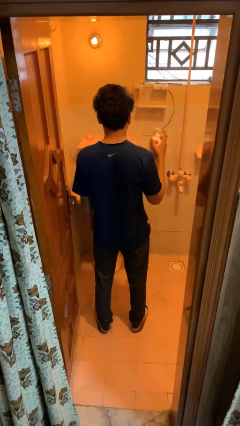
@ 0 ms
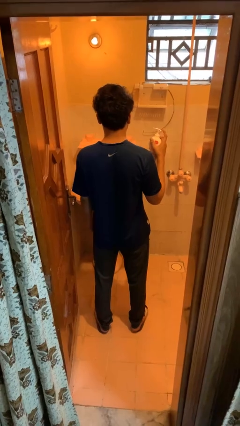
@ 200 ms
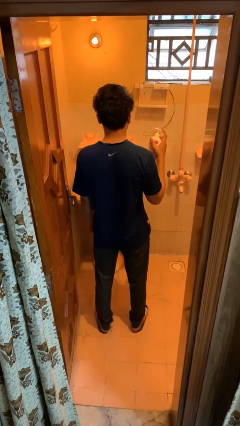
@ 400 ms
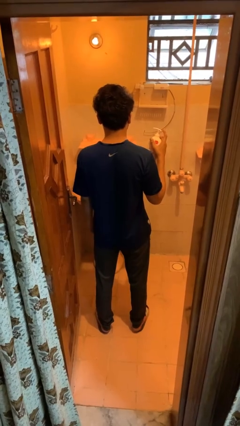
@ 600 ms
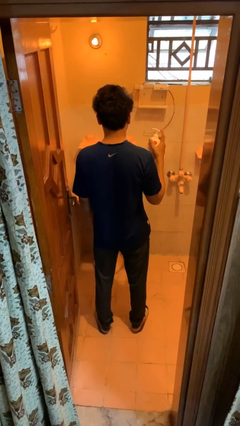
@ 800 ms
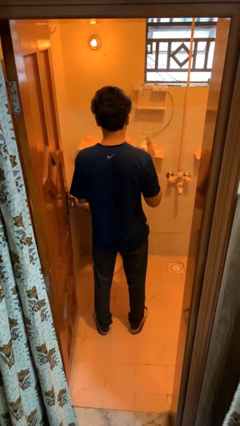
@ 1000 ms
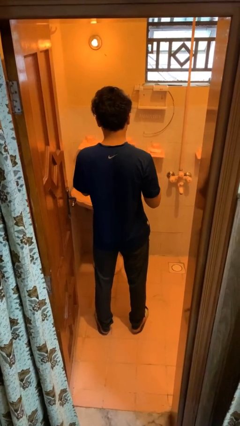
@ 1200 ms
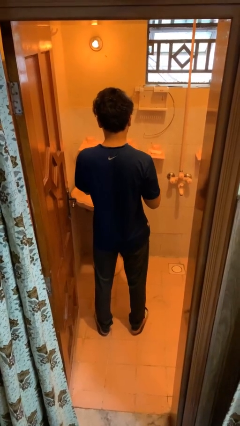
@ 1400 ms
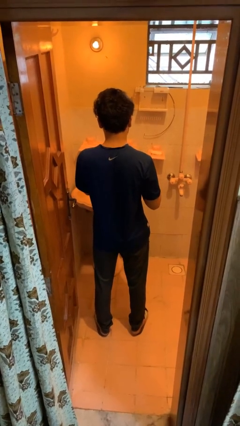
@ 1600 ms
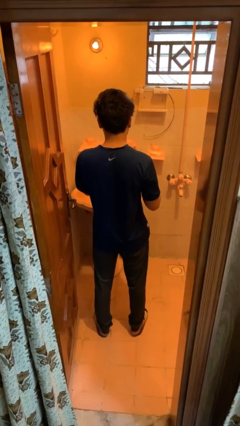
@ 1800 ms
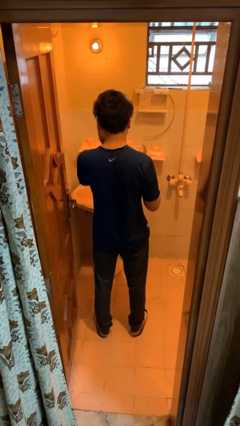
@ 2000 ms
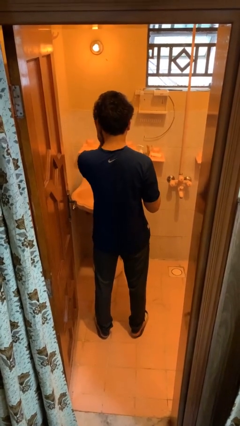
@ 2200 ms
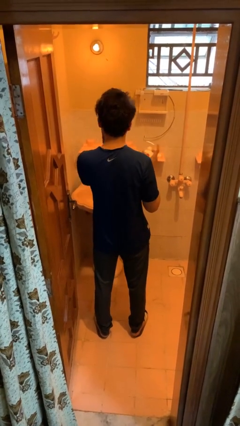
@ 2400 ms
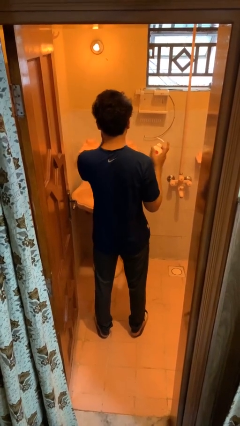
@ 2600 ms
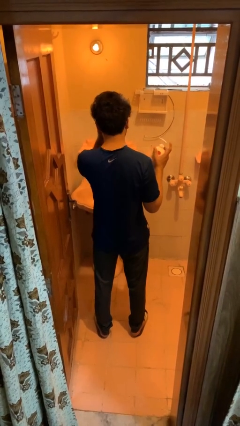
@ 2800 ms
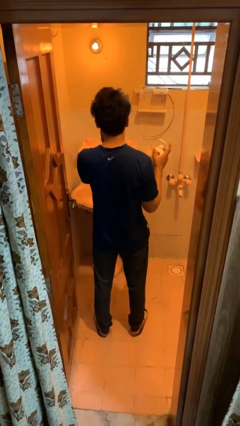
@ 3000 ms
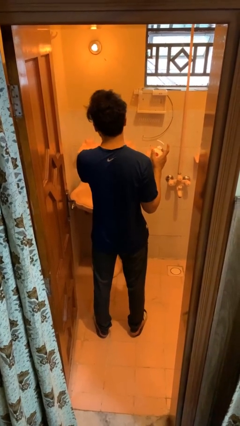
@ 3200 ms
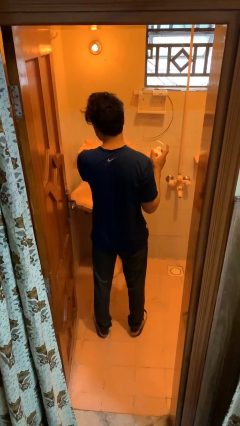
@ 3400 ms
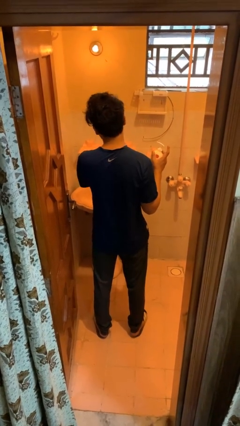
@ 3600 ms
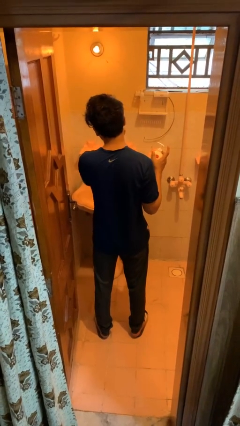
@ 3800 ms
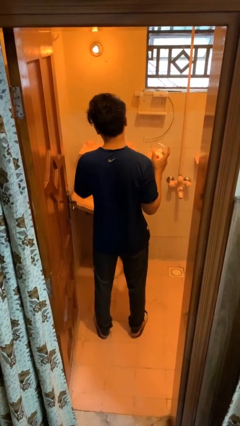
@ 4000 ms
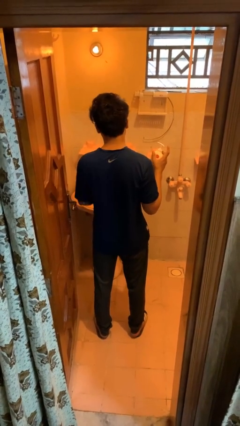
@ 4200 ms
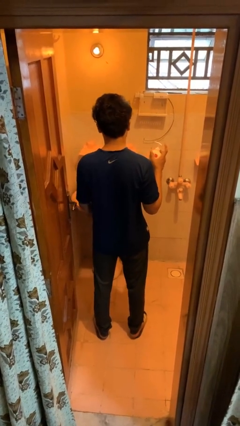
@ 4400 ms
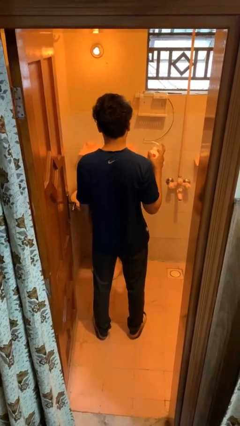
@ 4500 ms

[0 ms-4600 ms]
person applies sunscreen

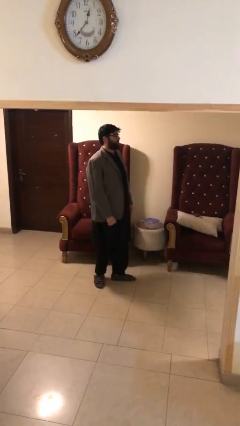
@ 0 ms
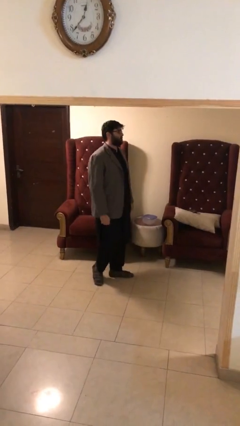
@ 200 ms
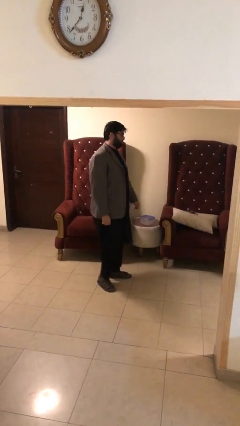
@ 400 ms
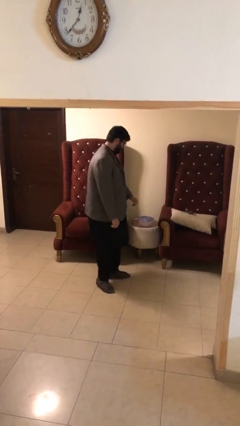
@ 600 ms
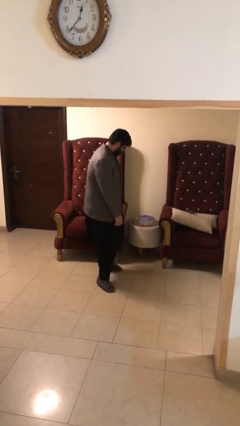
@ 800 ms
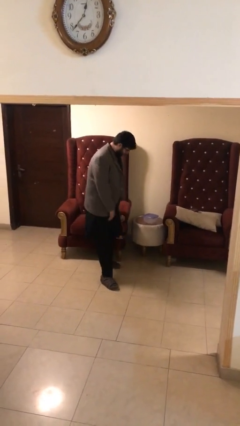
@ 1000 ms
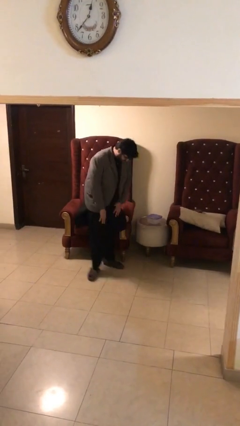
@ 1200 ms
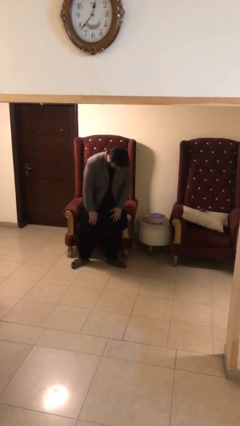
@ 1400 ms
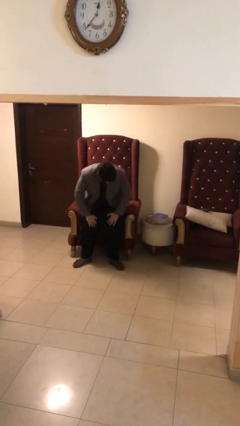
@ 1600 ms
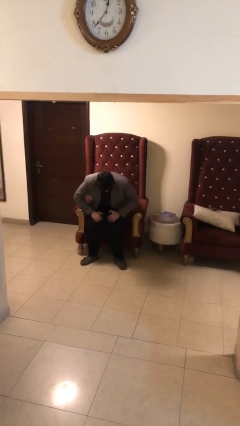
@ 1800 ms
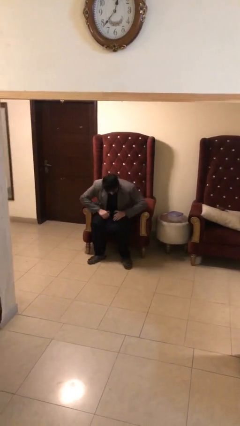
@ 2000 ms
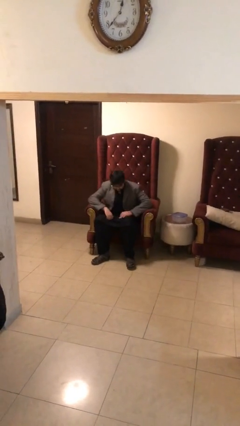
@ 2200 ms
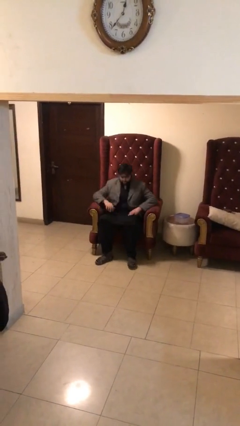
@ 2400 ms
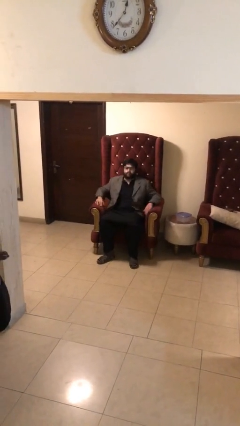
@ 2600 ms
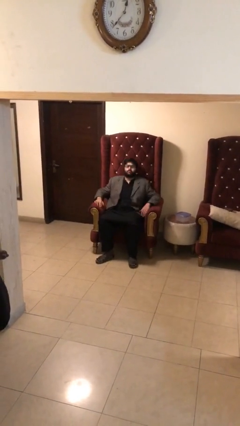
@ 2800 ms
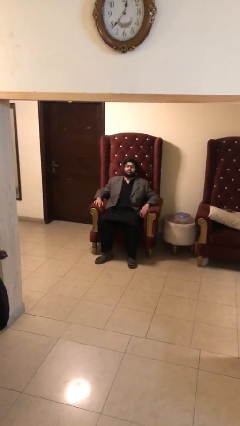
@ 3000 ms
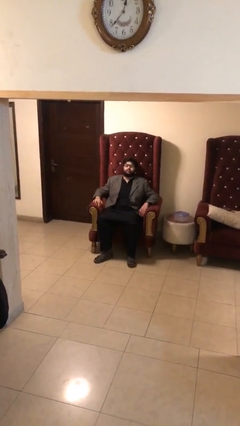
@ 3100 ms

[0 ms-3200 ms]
person sits down

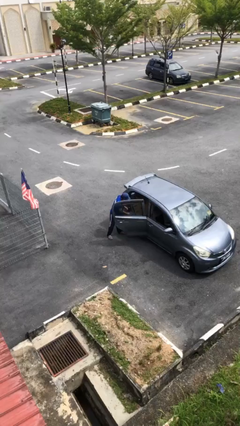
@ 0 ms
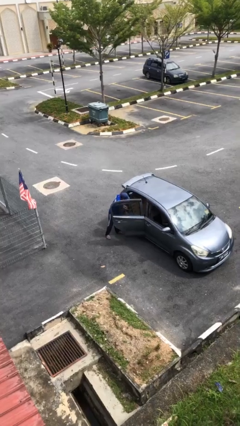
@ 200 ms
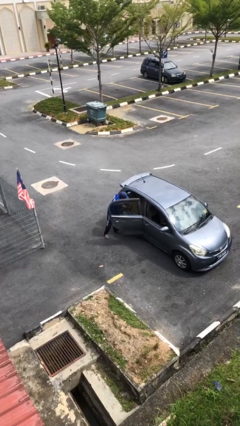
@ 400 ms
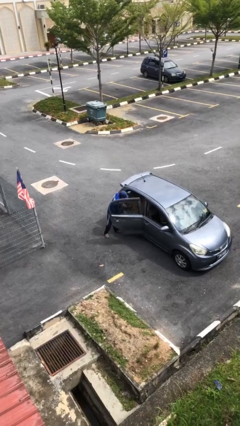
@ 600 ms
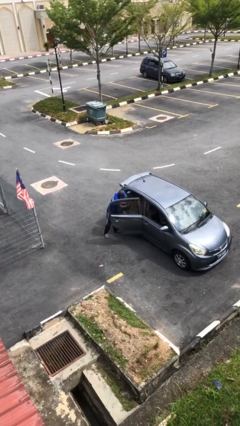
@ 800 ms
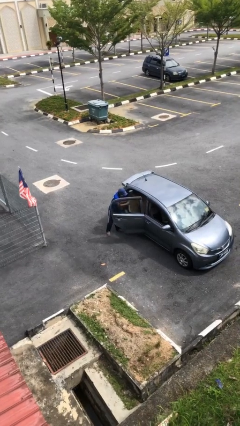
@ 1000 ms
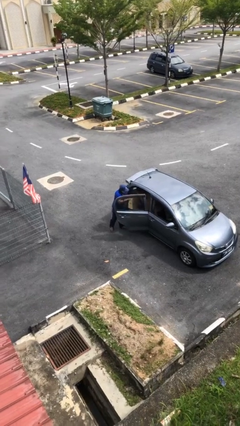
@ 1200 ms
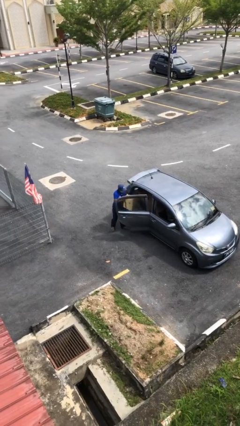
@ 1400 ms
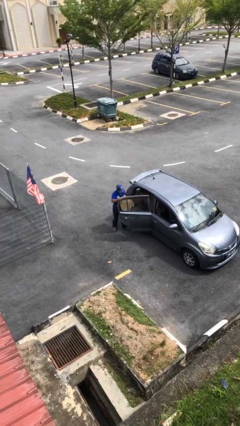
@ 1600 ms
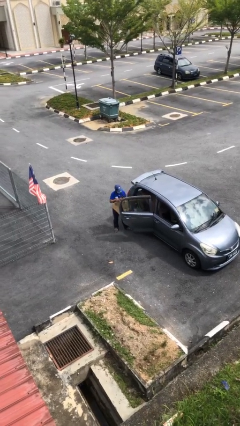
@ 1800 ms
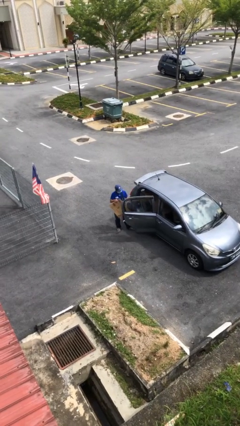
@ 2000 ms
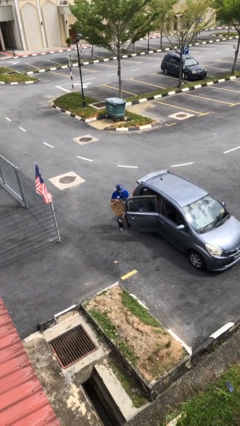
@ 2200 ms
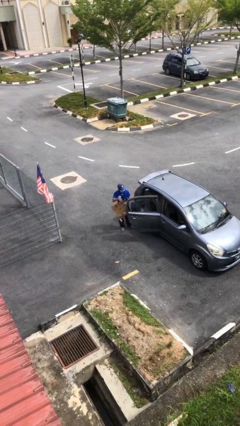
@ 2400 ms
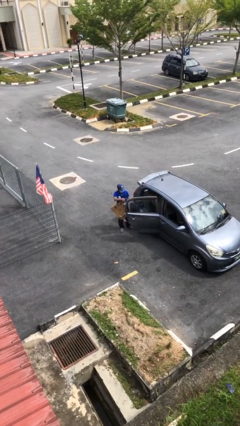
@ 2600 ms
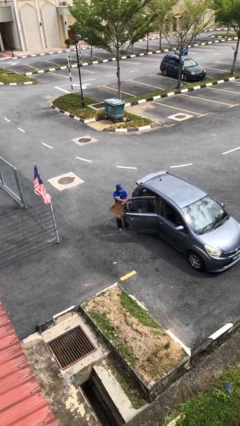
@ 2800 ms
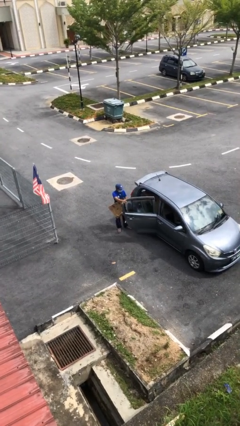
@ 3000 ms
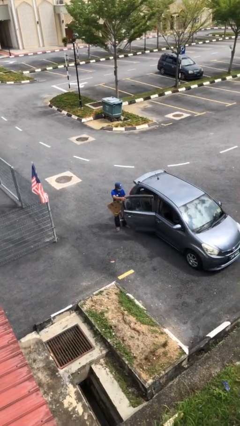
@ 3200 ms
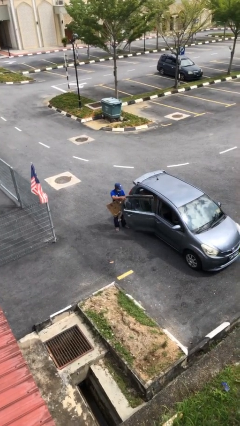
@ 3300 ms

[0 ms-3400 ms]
person unloads car

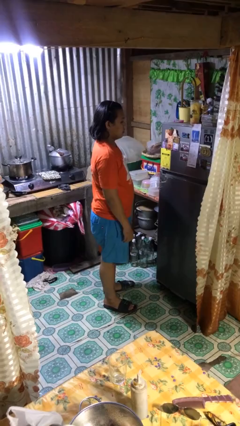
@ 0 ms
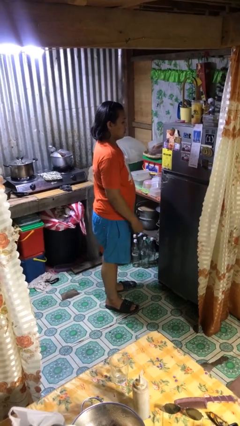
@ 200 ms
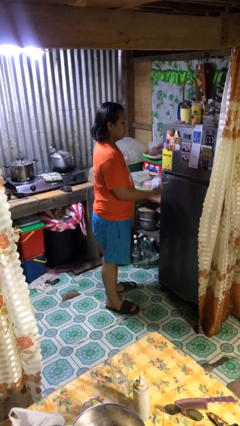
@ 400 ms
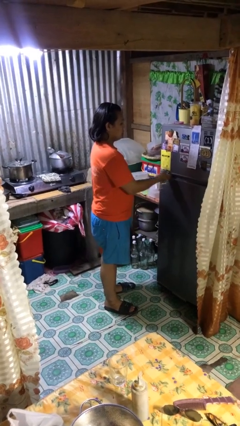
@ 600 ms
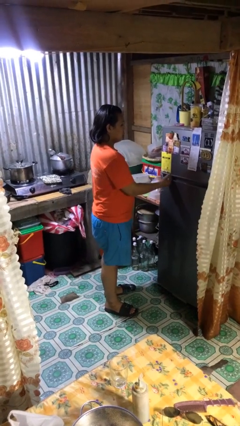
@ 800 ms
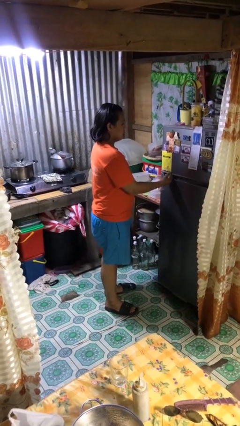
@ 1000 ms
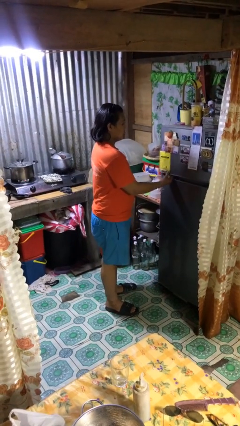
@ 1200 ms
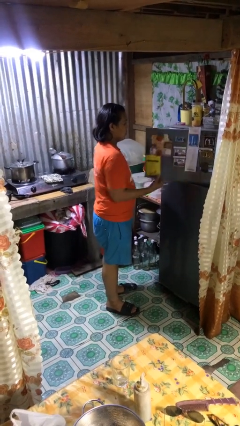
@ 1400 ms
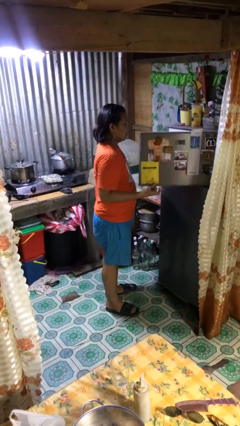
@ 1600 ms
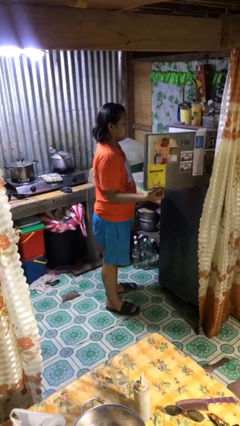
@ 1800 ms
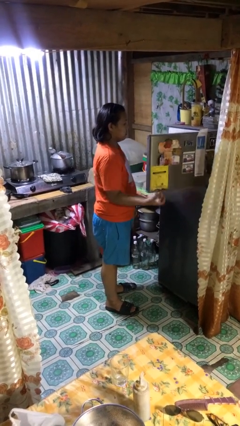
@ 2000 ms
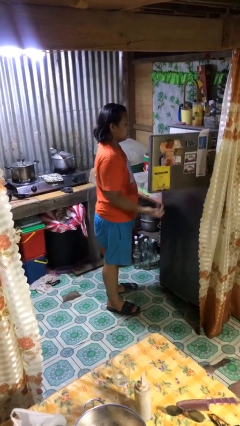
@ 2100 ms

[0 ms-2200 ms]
person opens refrigerator

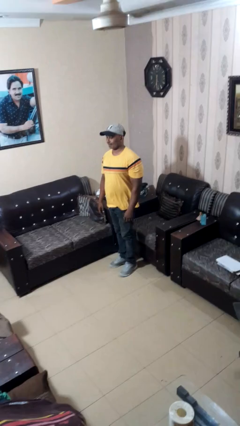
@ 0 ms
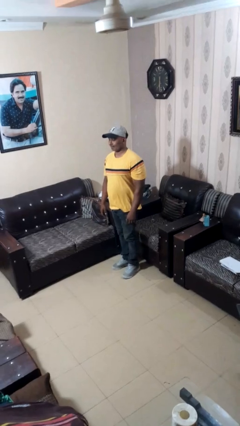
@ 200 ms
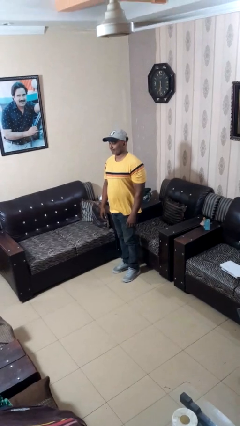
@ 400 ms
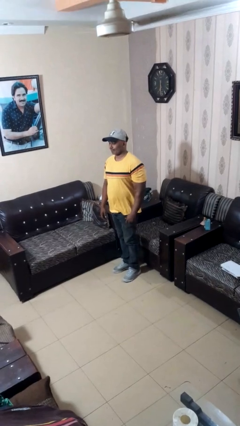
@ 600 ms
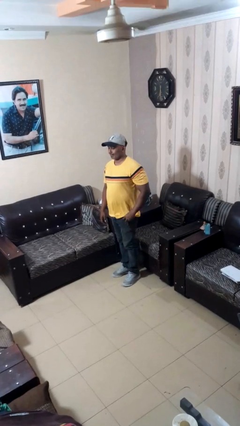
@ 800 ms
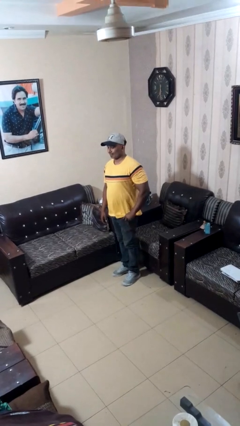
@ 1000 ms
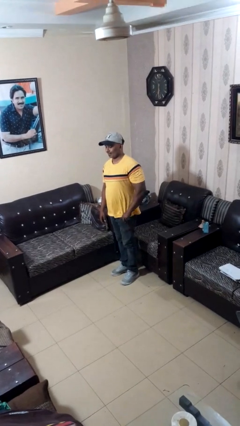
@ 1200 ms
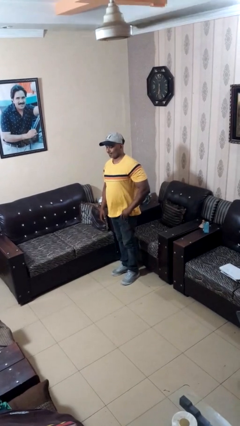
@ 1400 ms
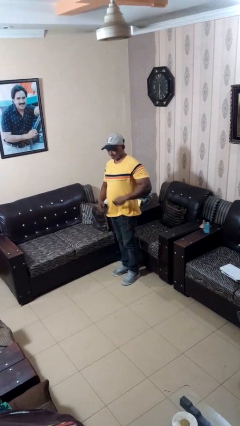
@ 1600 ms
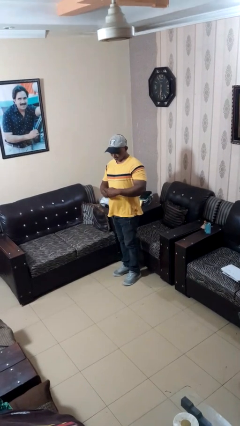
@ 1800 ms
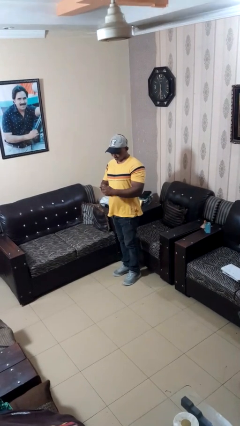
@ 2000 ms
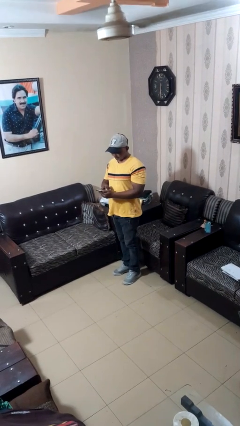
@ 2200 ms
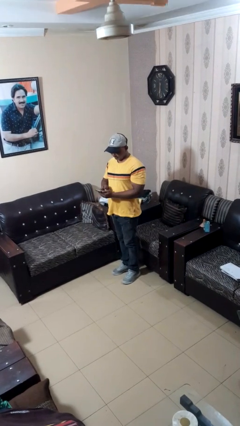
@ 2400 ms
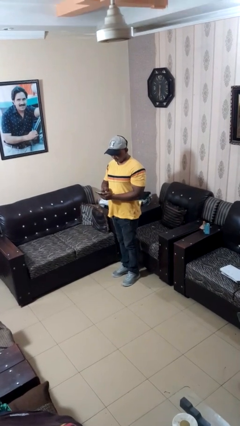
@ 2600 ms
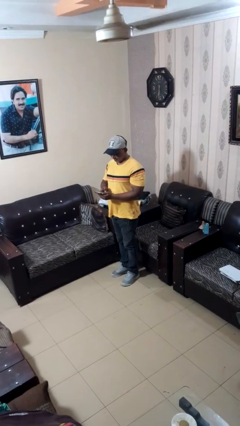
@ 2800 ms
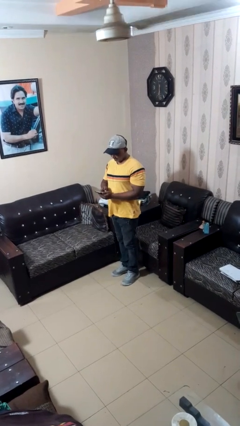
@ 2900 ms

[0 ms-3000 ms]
person takes phone from pocket

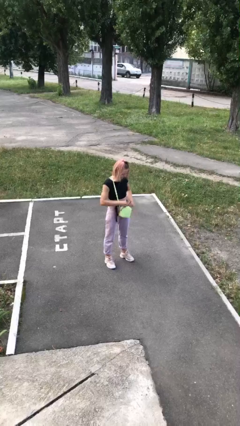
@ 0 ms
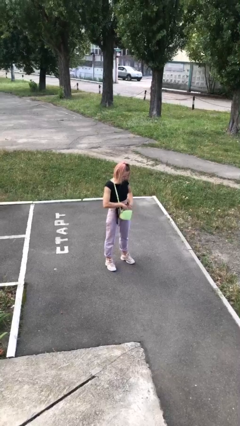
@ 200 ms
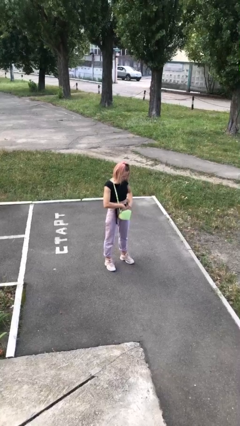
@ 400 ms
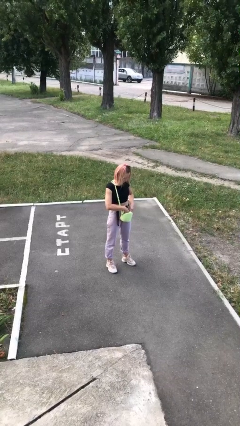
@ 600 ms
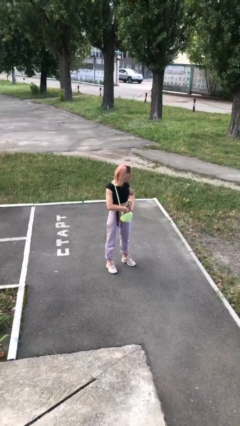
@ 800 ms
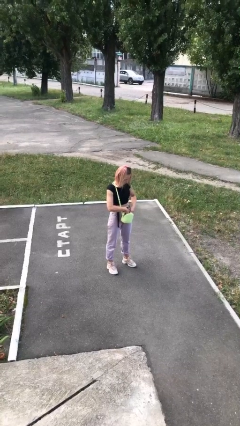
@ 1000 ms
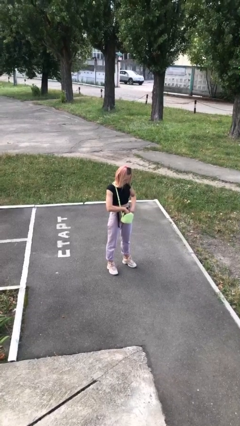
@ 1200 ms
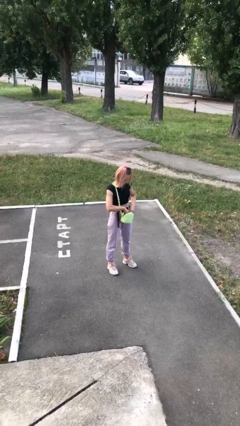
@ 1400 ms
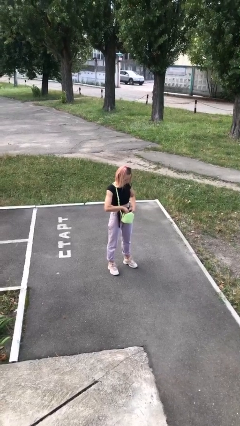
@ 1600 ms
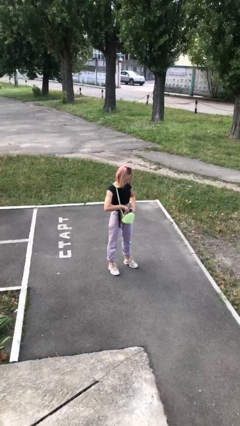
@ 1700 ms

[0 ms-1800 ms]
person searches in backpack
